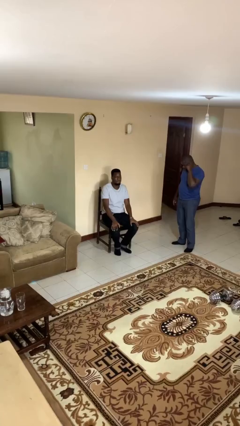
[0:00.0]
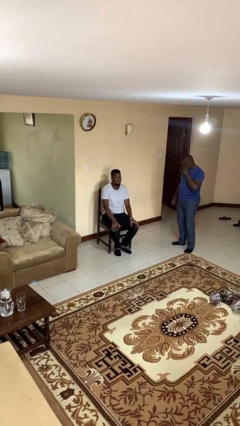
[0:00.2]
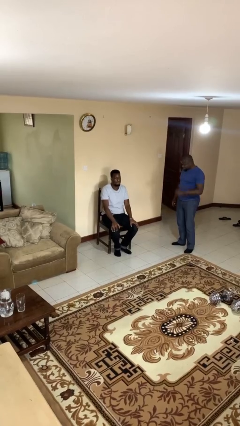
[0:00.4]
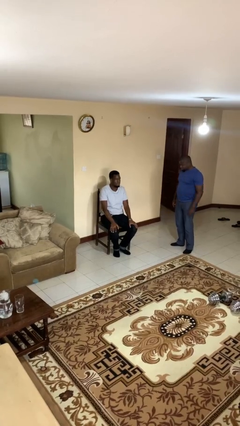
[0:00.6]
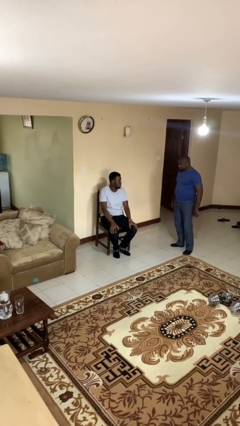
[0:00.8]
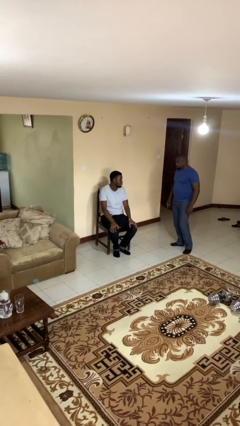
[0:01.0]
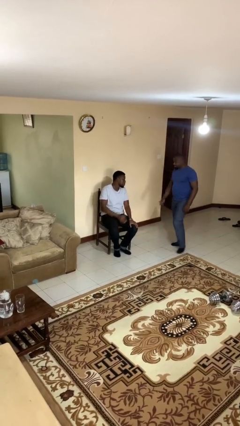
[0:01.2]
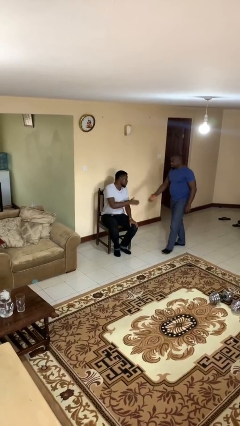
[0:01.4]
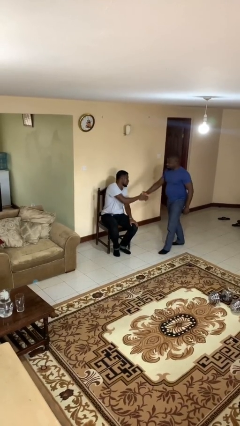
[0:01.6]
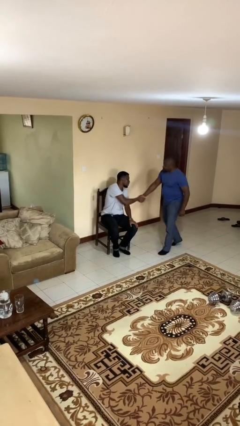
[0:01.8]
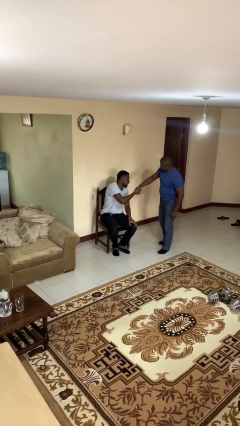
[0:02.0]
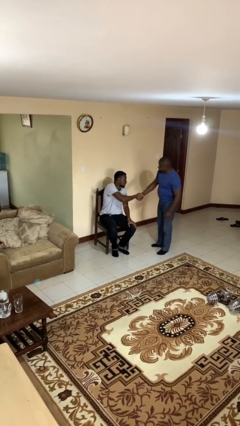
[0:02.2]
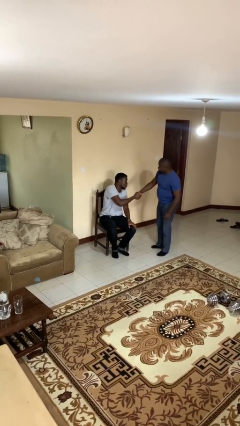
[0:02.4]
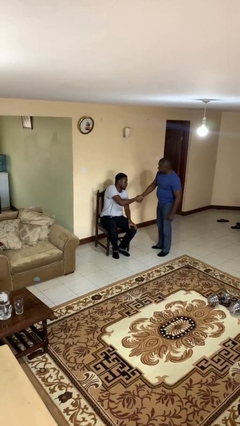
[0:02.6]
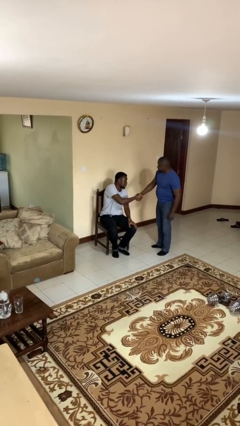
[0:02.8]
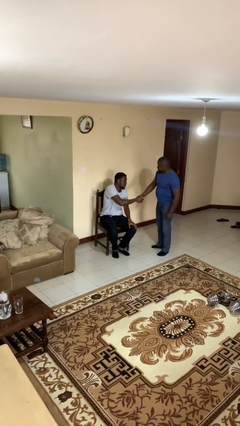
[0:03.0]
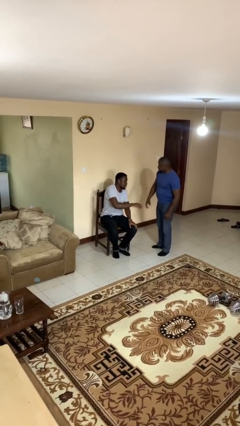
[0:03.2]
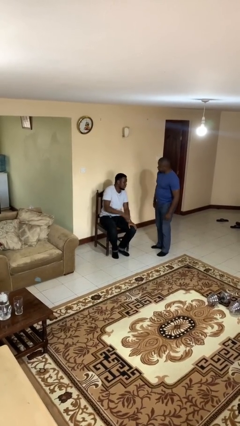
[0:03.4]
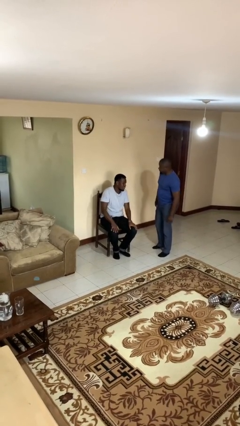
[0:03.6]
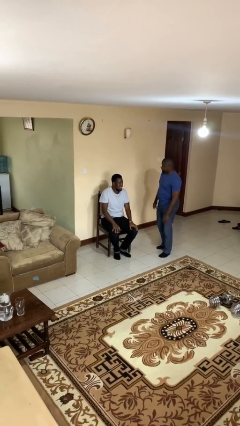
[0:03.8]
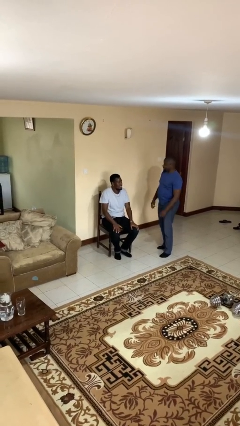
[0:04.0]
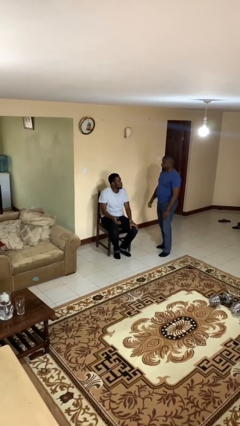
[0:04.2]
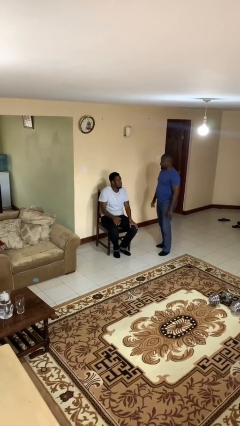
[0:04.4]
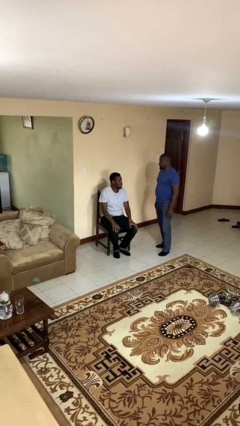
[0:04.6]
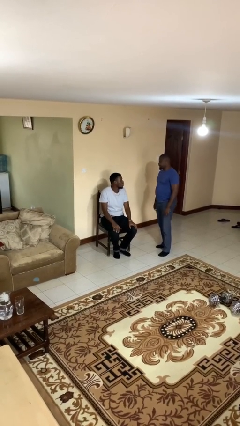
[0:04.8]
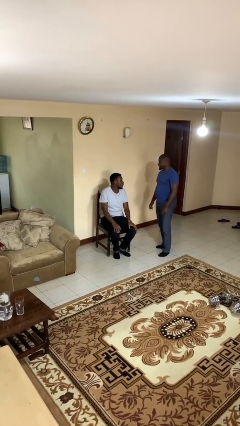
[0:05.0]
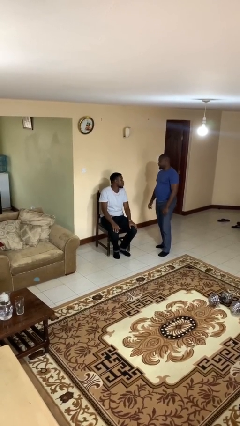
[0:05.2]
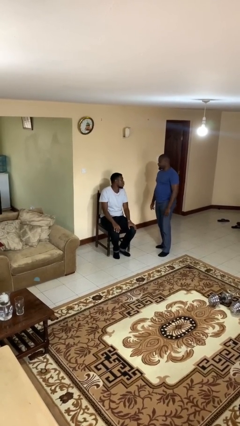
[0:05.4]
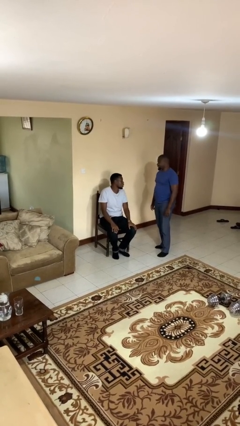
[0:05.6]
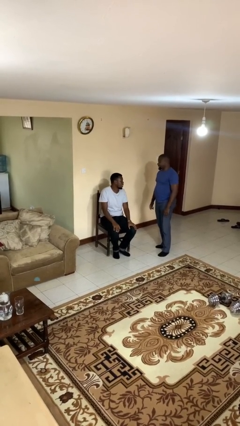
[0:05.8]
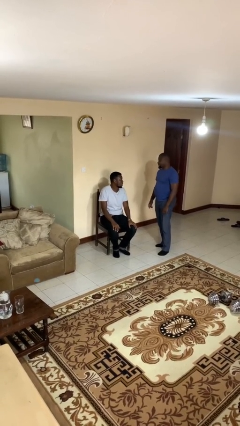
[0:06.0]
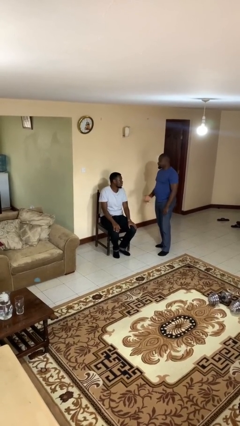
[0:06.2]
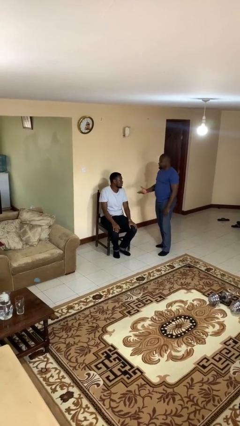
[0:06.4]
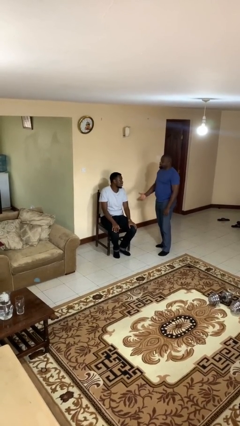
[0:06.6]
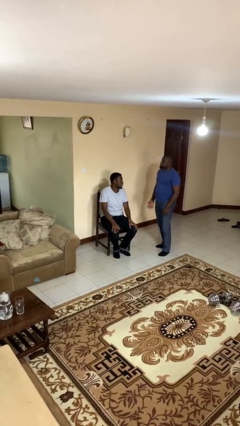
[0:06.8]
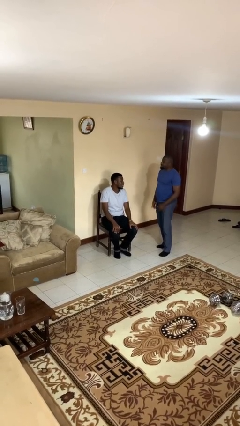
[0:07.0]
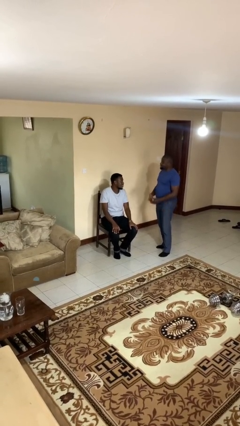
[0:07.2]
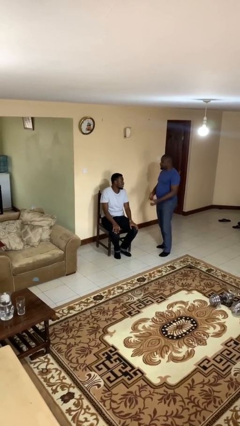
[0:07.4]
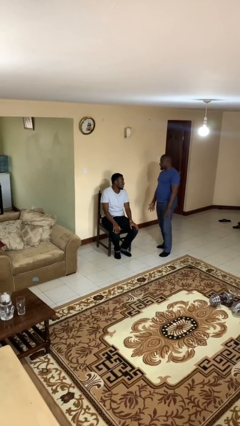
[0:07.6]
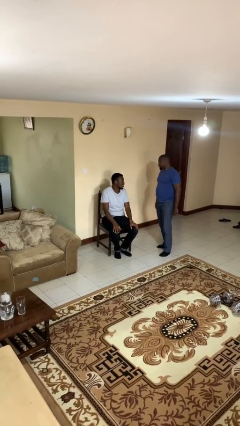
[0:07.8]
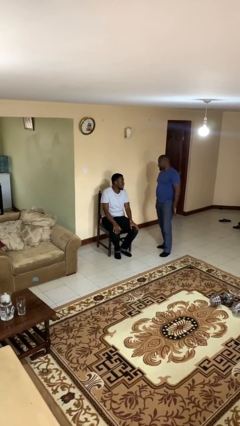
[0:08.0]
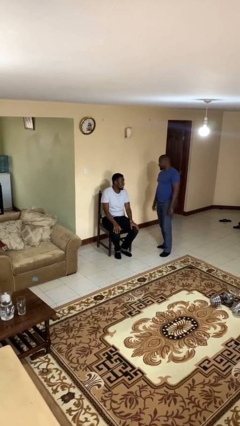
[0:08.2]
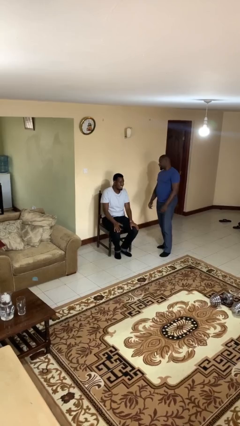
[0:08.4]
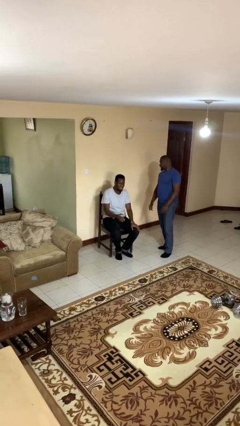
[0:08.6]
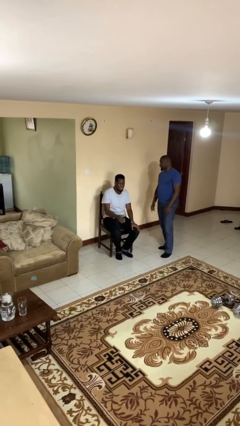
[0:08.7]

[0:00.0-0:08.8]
person shakes hand

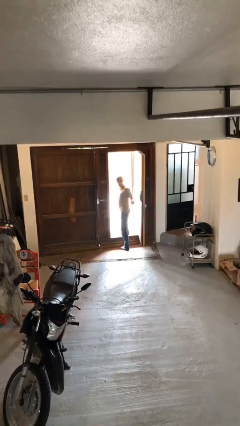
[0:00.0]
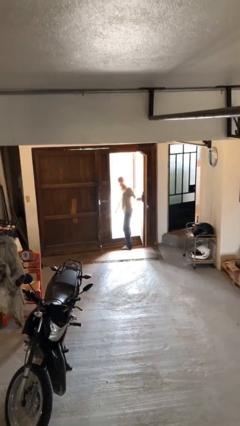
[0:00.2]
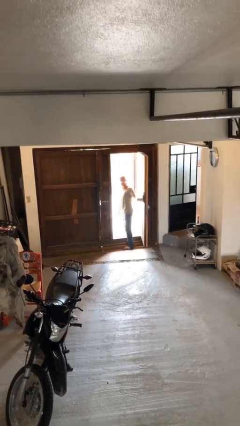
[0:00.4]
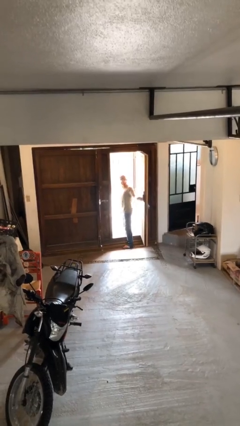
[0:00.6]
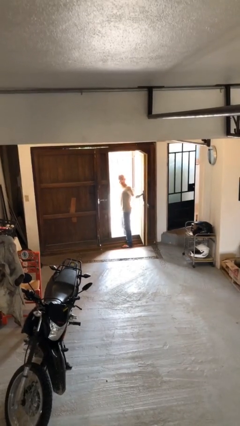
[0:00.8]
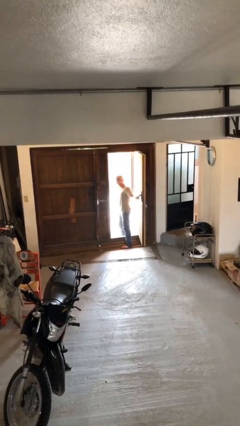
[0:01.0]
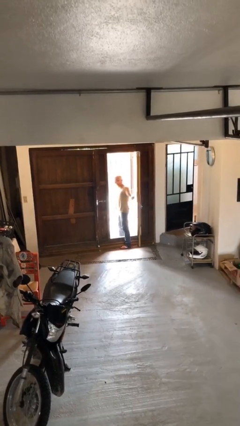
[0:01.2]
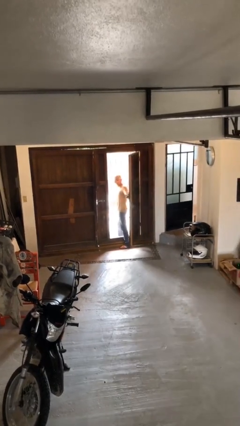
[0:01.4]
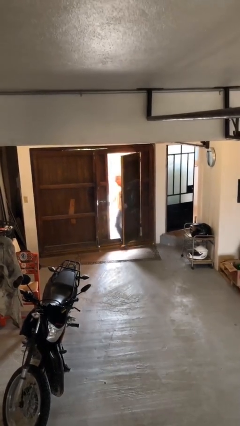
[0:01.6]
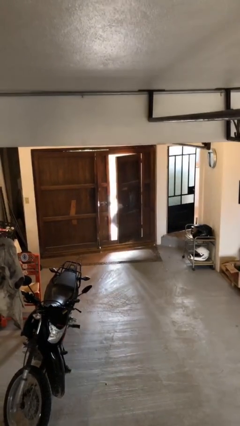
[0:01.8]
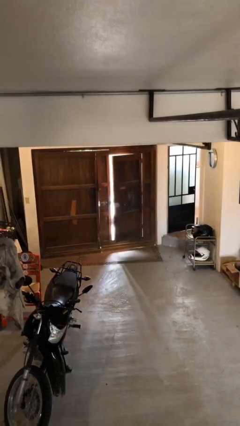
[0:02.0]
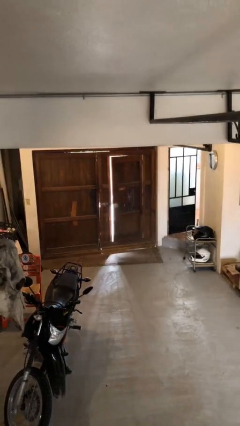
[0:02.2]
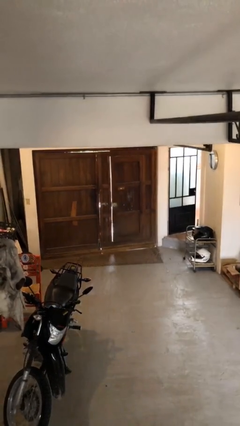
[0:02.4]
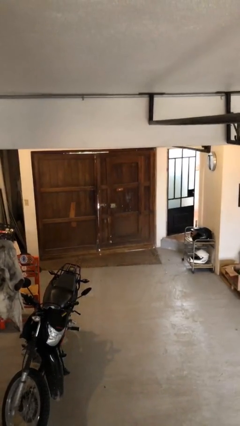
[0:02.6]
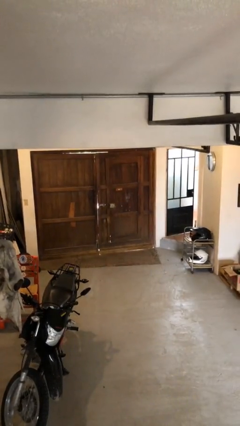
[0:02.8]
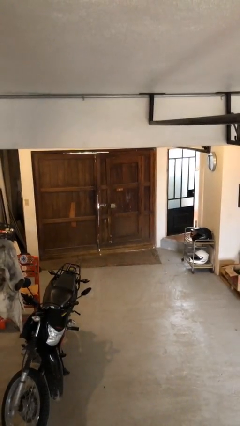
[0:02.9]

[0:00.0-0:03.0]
person closes facility door

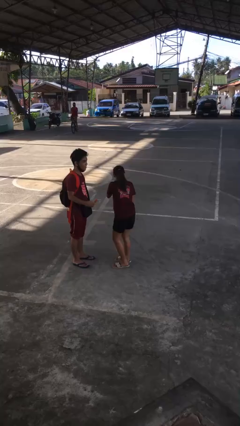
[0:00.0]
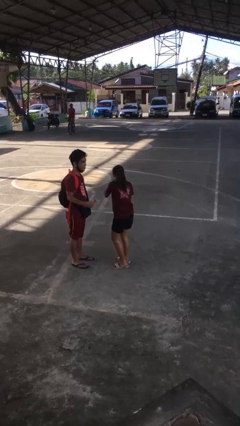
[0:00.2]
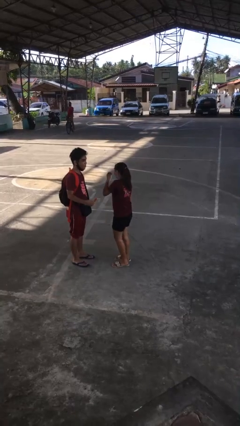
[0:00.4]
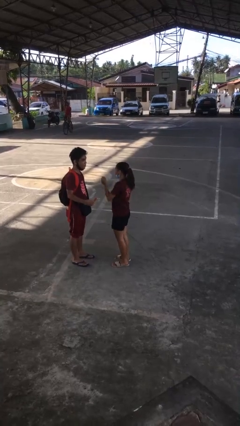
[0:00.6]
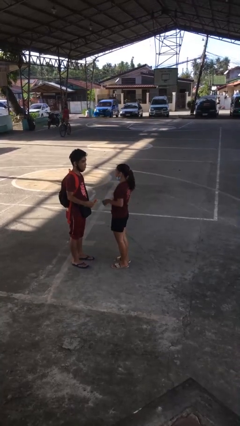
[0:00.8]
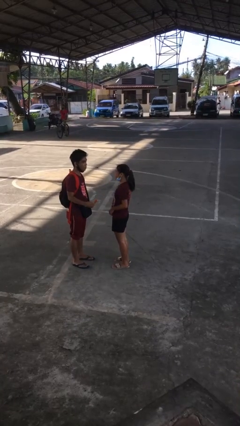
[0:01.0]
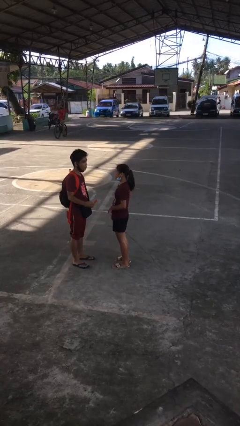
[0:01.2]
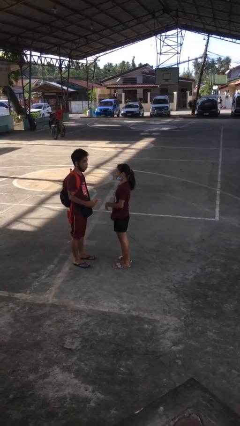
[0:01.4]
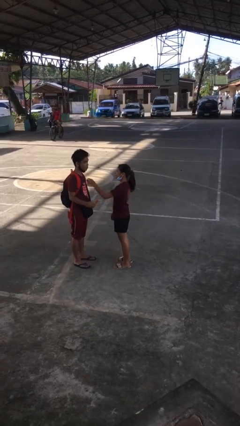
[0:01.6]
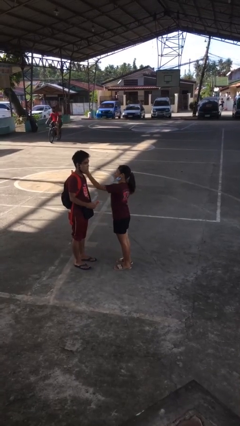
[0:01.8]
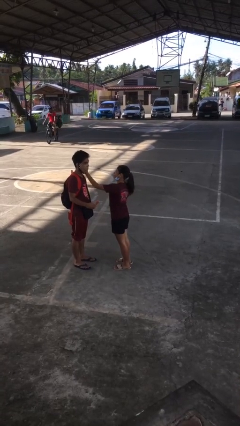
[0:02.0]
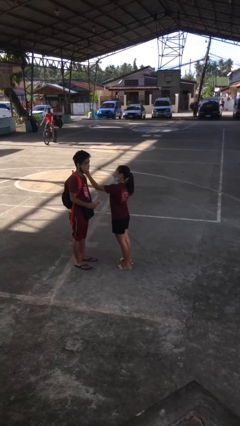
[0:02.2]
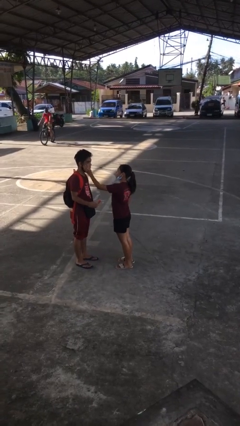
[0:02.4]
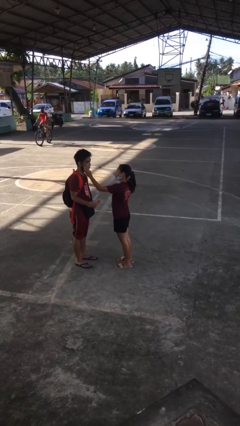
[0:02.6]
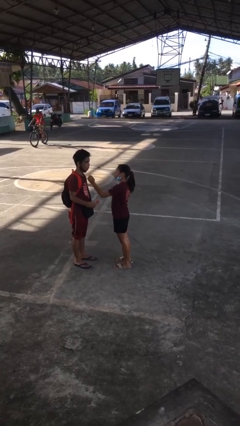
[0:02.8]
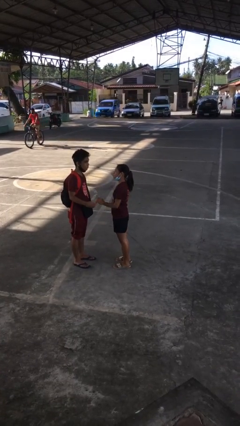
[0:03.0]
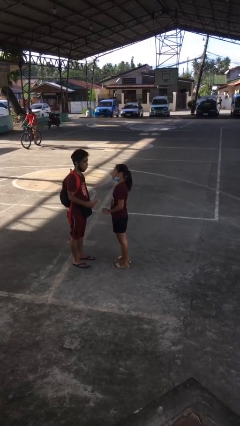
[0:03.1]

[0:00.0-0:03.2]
person touches face of person

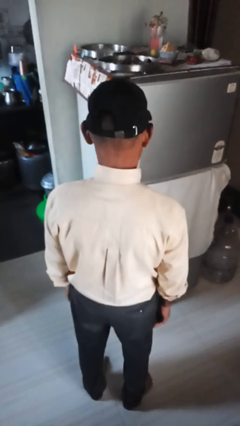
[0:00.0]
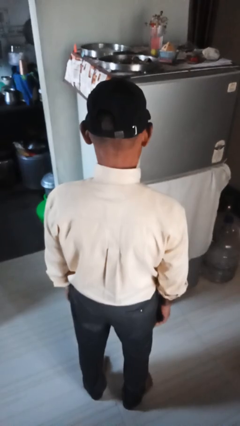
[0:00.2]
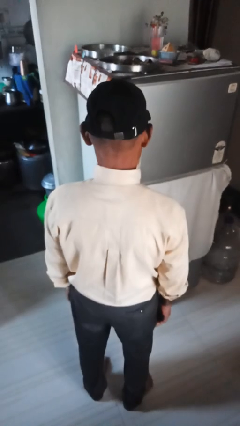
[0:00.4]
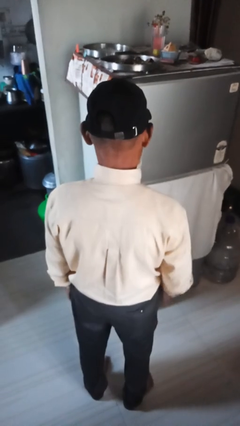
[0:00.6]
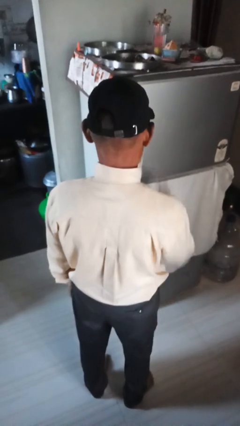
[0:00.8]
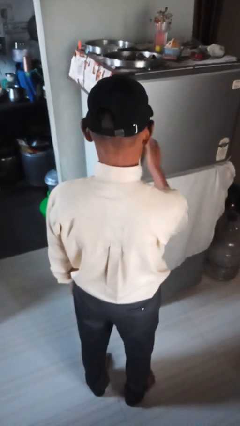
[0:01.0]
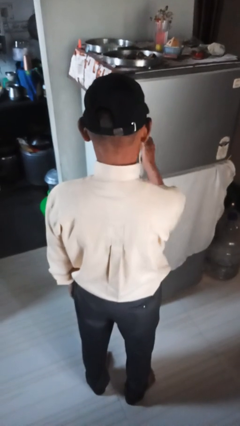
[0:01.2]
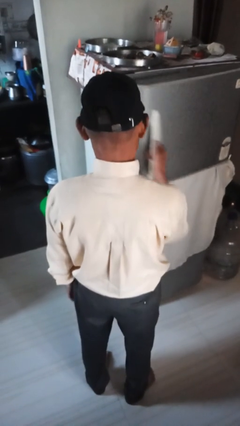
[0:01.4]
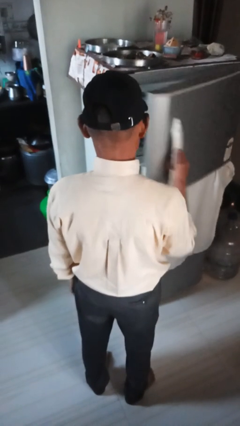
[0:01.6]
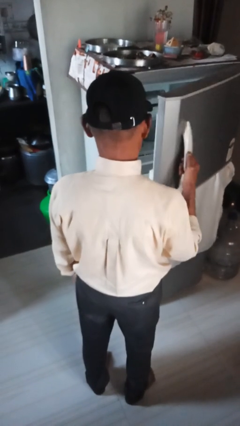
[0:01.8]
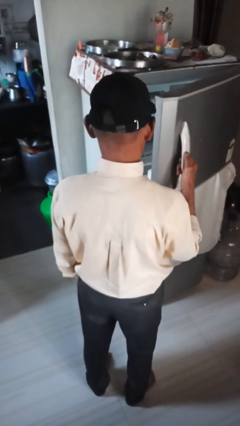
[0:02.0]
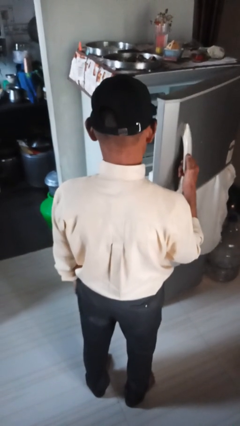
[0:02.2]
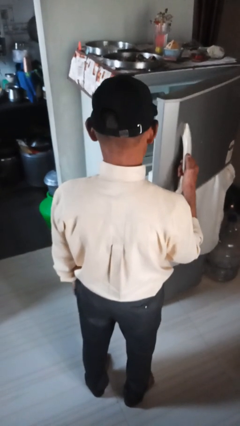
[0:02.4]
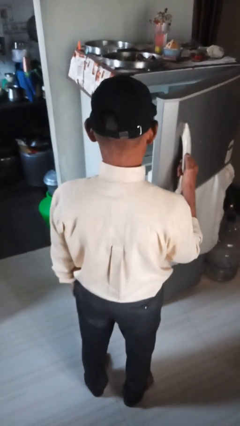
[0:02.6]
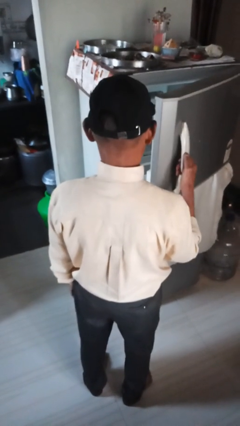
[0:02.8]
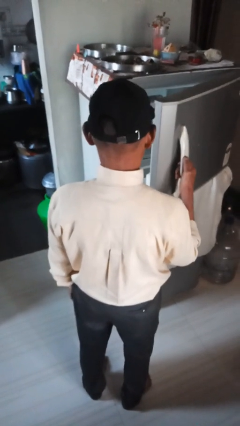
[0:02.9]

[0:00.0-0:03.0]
person opens clothes washer
